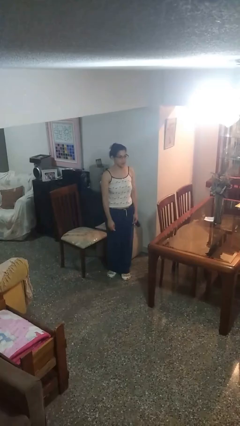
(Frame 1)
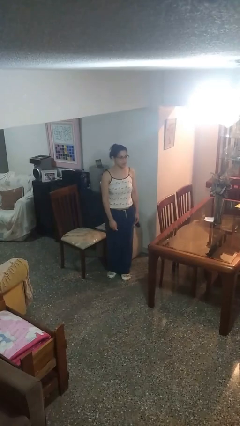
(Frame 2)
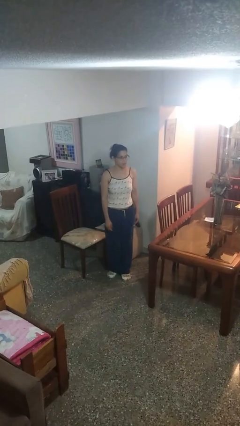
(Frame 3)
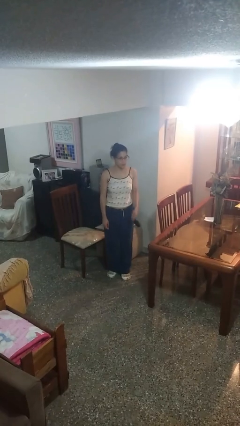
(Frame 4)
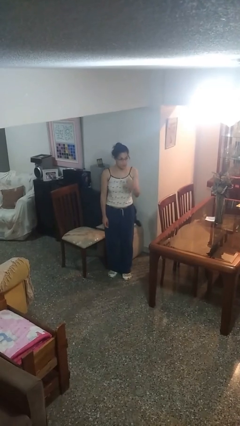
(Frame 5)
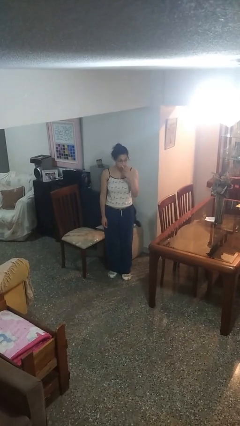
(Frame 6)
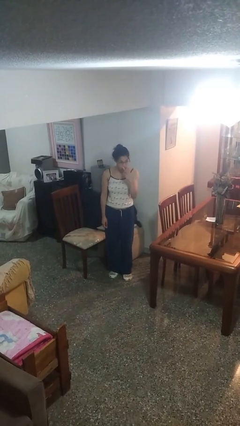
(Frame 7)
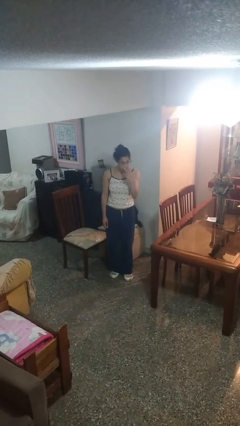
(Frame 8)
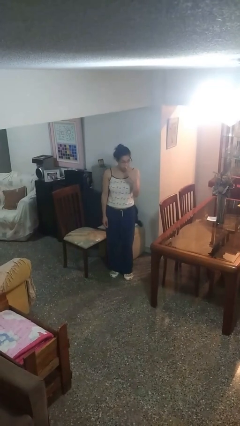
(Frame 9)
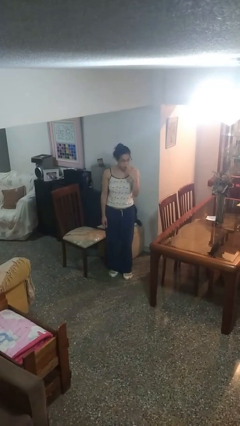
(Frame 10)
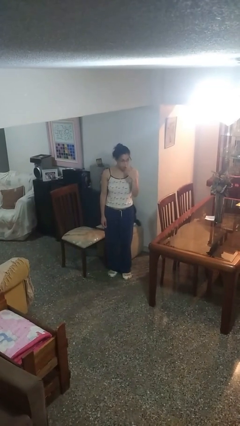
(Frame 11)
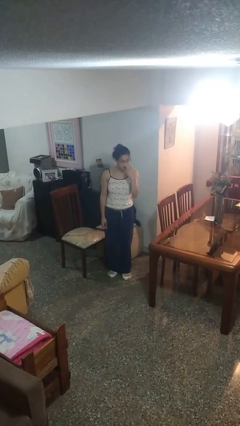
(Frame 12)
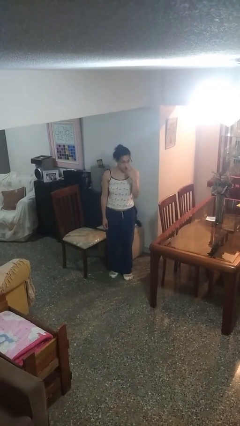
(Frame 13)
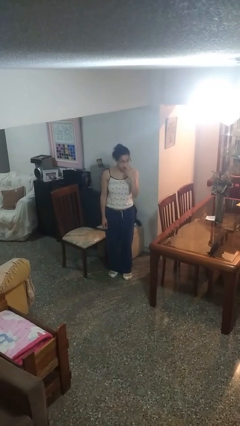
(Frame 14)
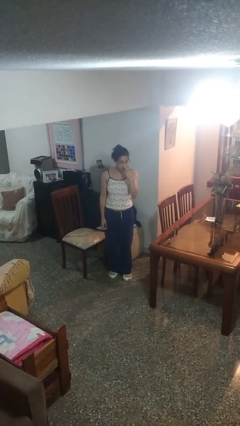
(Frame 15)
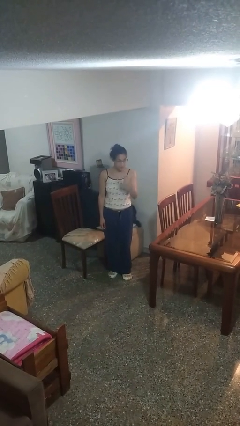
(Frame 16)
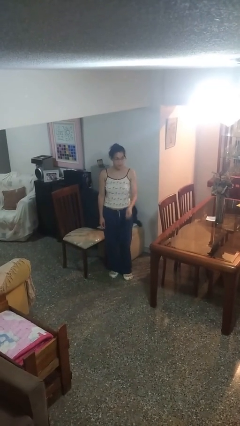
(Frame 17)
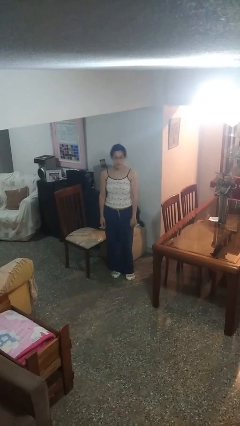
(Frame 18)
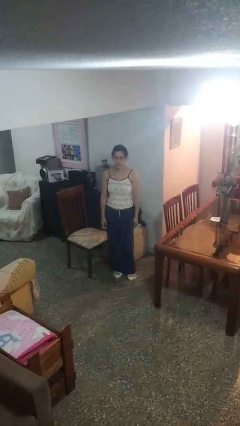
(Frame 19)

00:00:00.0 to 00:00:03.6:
person gestures watch closely

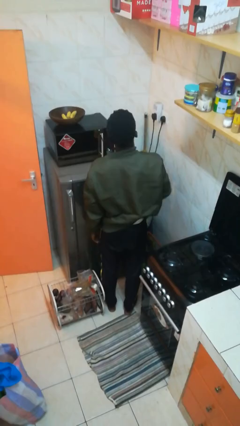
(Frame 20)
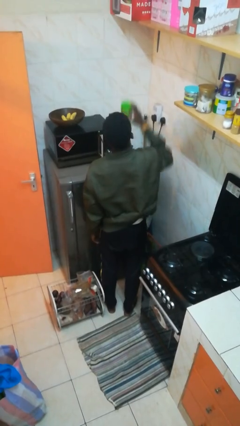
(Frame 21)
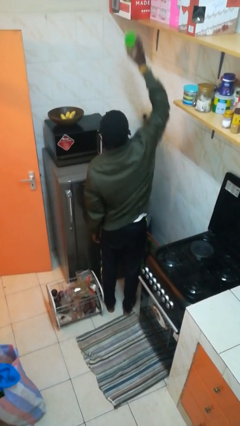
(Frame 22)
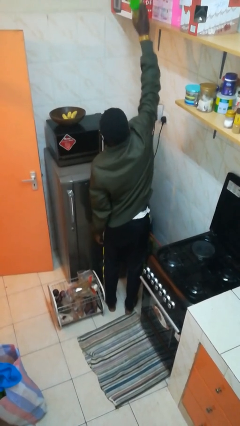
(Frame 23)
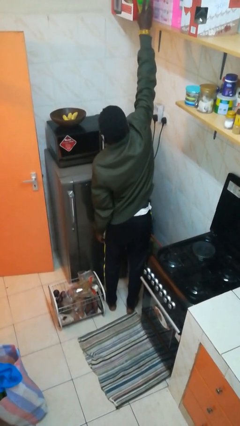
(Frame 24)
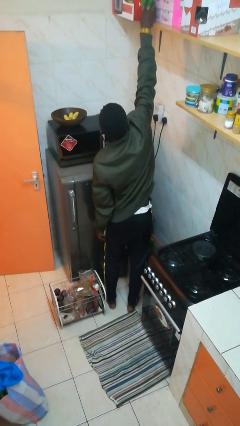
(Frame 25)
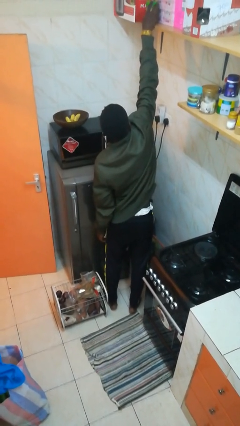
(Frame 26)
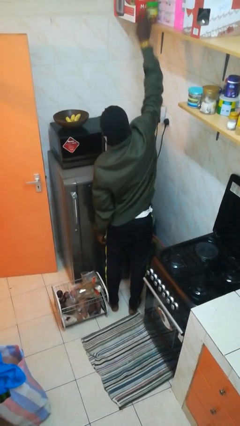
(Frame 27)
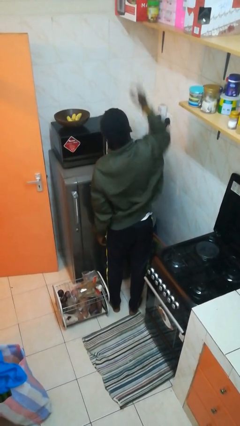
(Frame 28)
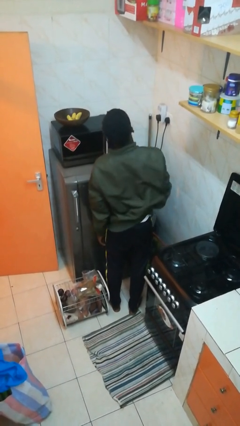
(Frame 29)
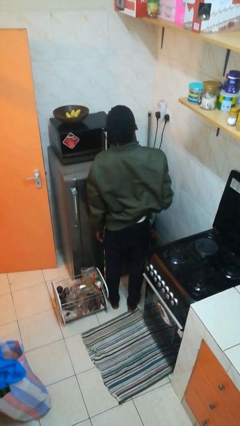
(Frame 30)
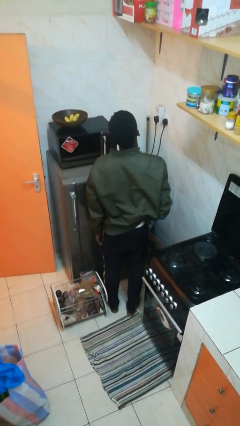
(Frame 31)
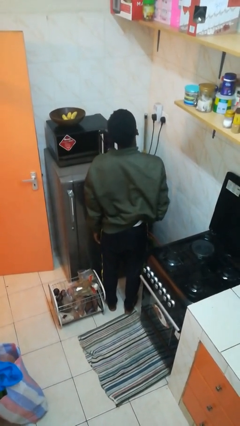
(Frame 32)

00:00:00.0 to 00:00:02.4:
person puts down object on shelf

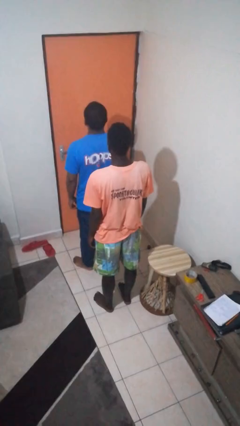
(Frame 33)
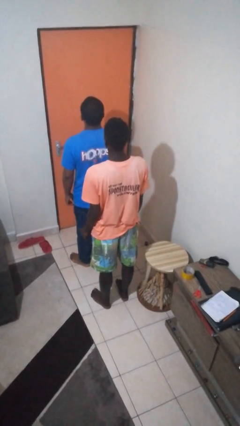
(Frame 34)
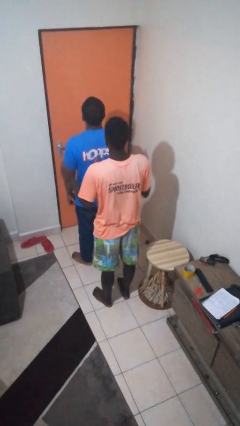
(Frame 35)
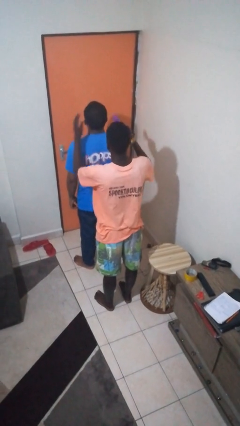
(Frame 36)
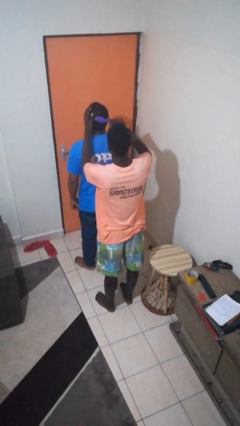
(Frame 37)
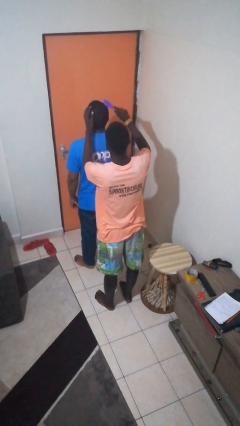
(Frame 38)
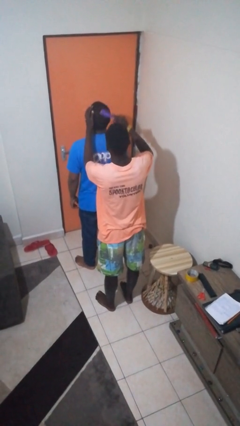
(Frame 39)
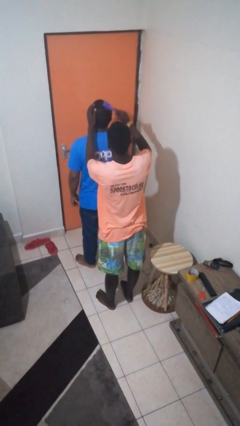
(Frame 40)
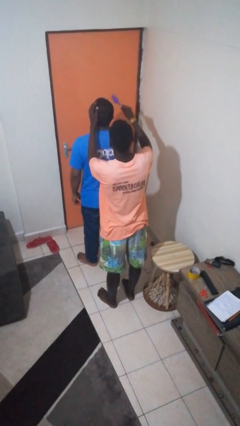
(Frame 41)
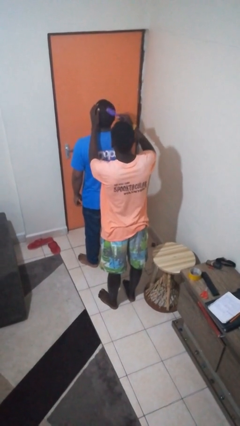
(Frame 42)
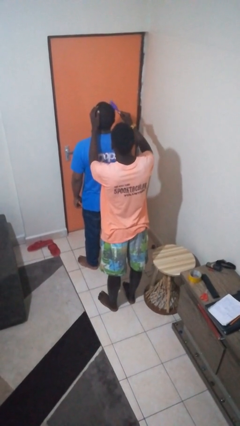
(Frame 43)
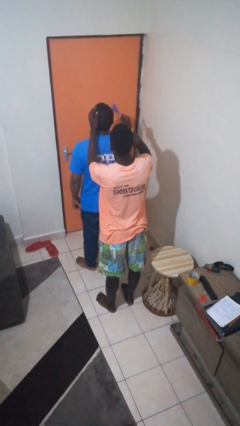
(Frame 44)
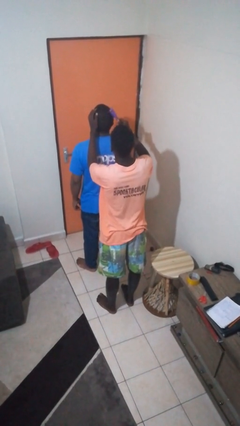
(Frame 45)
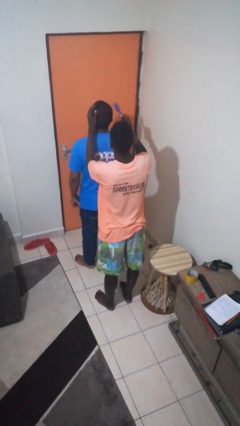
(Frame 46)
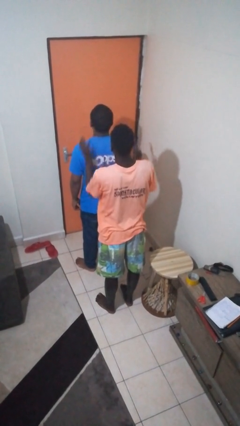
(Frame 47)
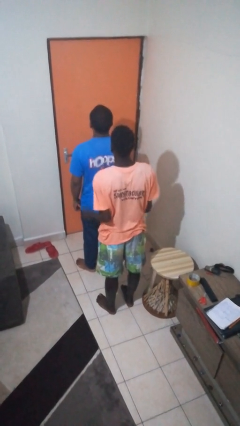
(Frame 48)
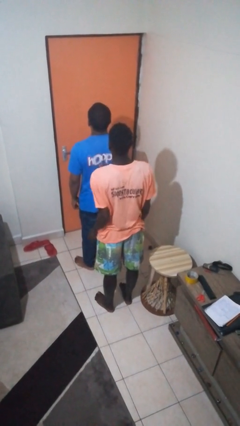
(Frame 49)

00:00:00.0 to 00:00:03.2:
person brushes hair of person

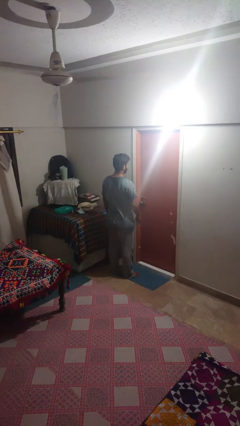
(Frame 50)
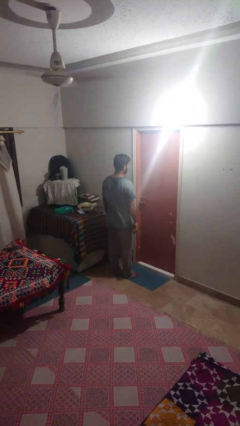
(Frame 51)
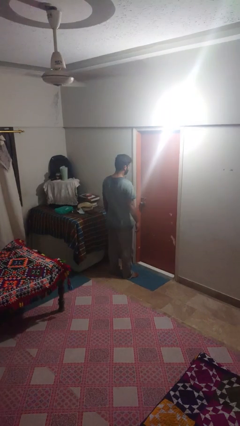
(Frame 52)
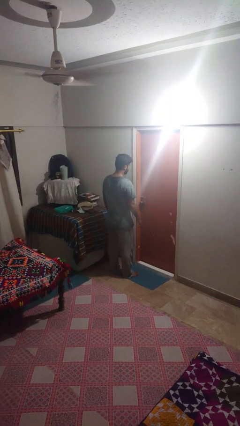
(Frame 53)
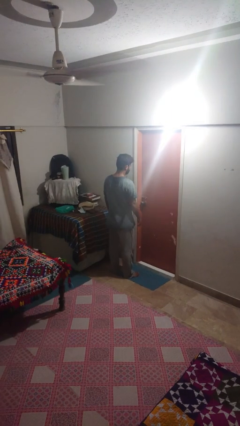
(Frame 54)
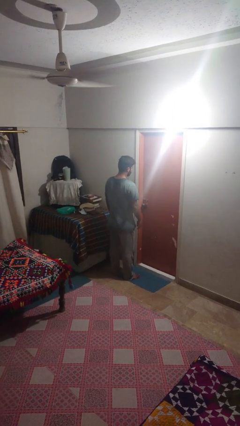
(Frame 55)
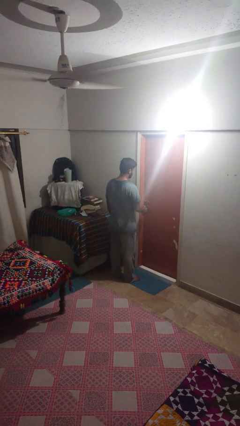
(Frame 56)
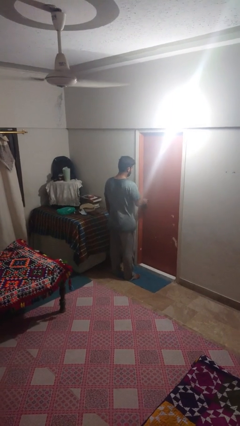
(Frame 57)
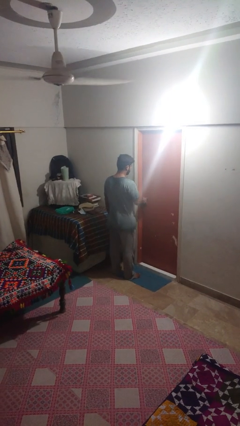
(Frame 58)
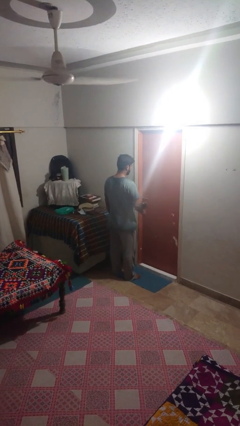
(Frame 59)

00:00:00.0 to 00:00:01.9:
person locks door with keys

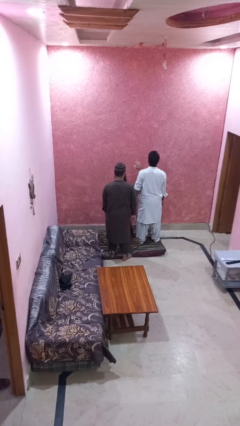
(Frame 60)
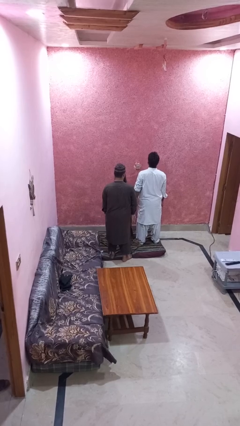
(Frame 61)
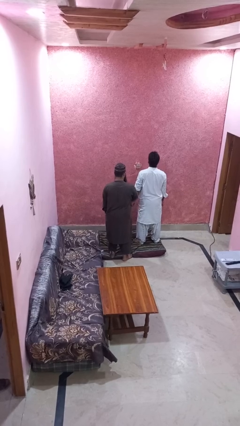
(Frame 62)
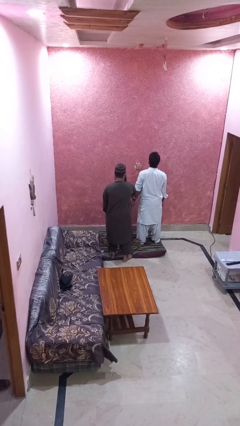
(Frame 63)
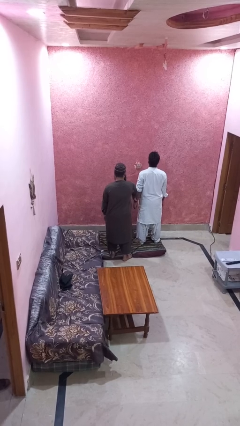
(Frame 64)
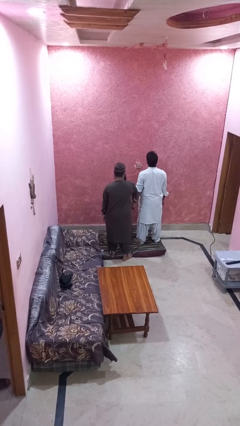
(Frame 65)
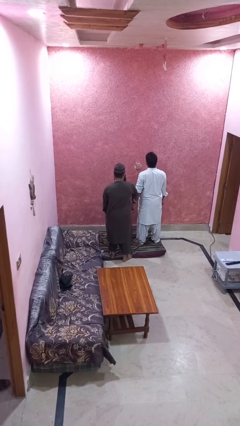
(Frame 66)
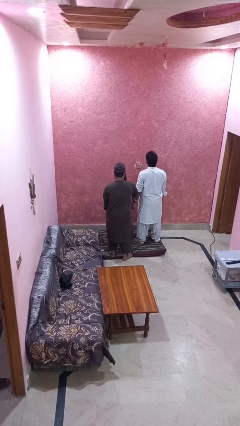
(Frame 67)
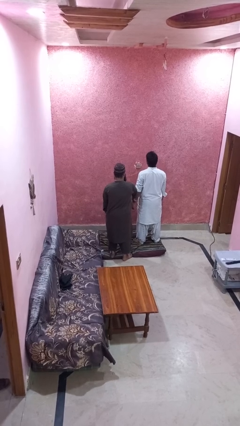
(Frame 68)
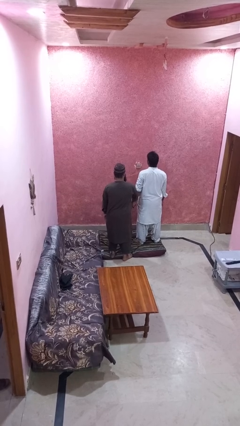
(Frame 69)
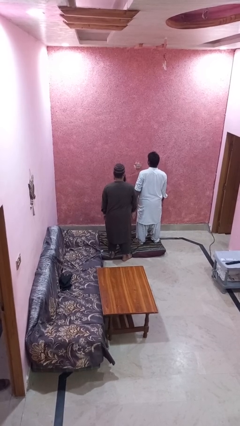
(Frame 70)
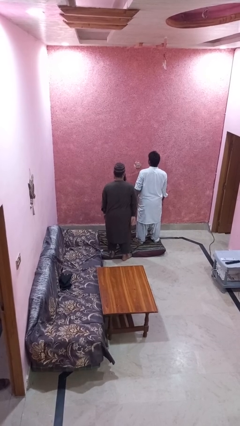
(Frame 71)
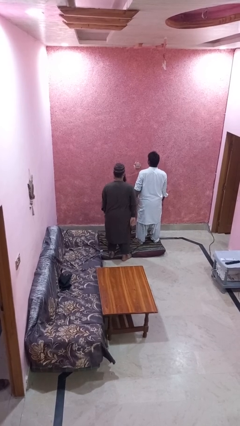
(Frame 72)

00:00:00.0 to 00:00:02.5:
person grabs person by forearm

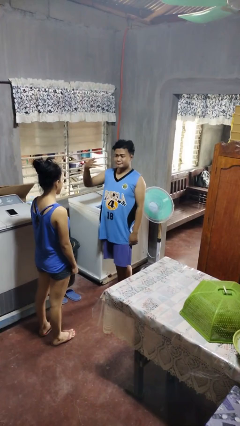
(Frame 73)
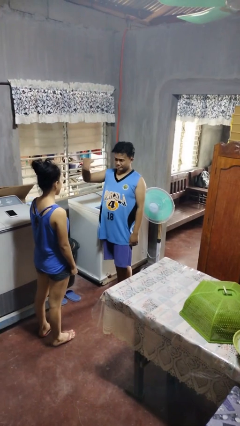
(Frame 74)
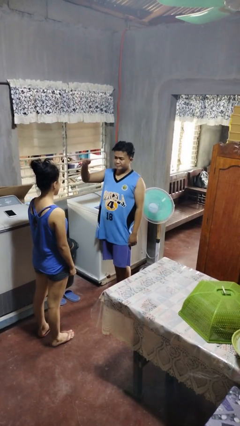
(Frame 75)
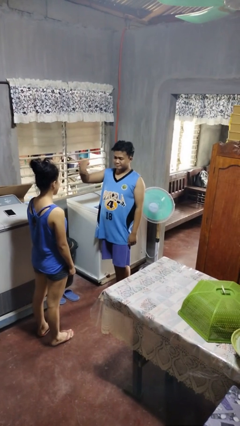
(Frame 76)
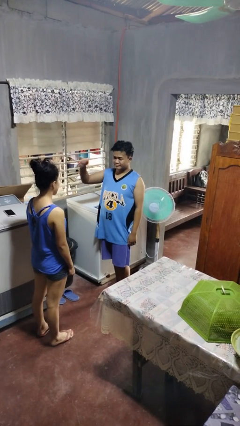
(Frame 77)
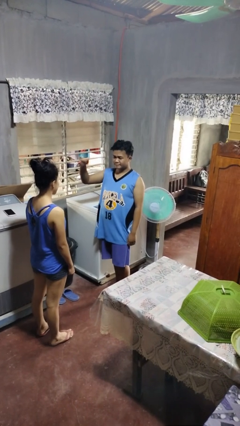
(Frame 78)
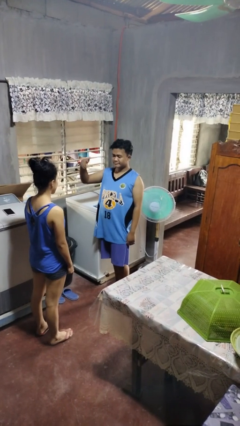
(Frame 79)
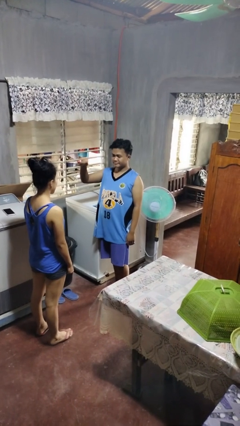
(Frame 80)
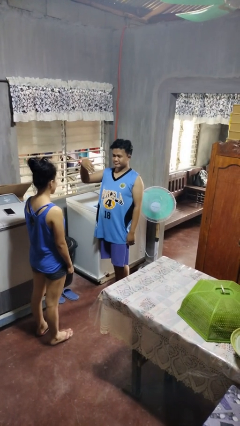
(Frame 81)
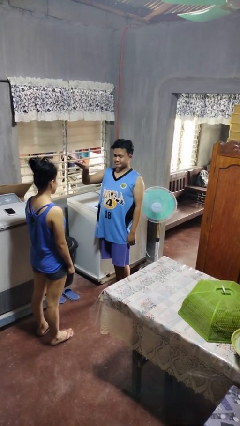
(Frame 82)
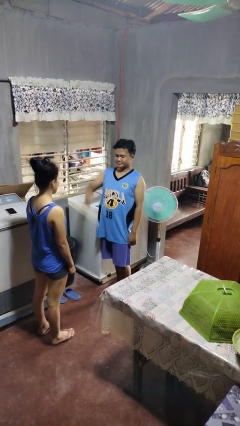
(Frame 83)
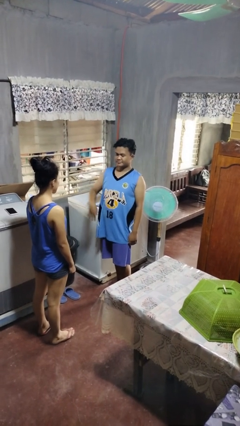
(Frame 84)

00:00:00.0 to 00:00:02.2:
person shoves person

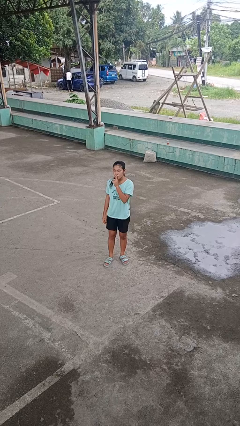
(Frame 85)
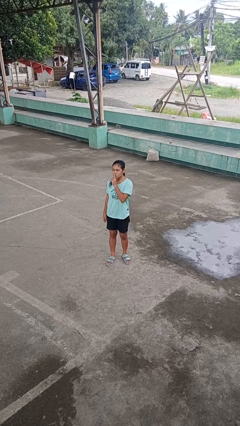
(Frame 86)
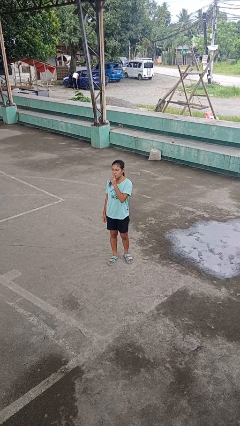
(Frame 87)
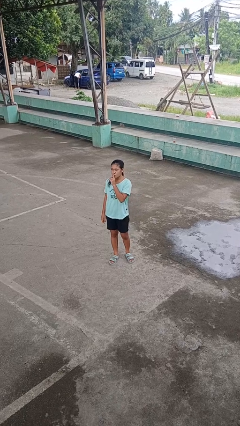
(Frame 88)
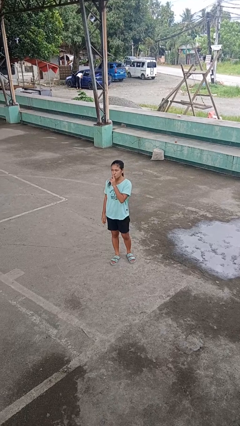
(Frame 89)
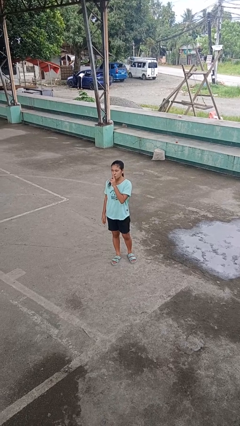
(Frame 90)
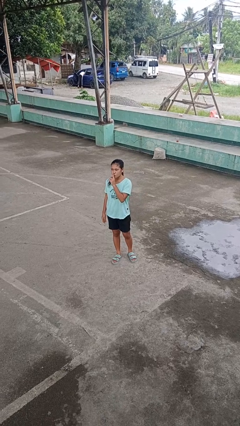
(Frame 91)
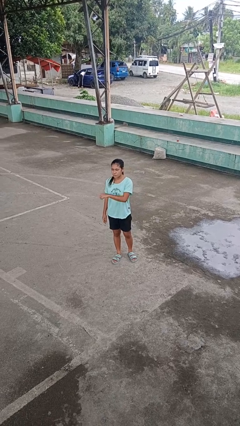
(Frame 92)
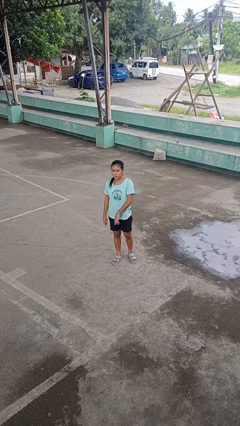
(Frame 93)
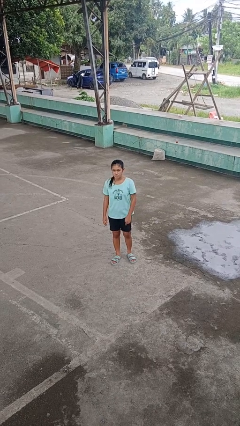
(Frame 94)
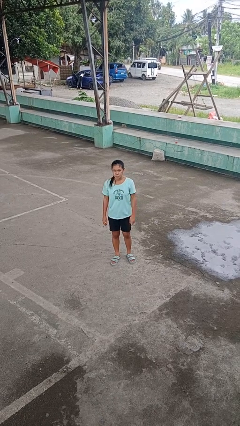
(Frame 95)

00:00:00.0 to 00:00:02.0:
person gestures be quiet
